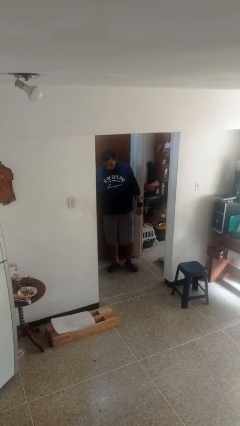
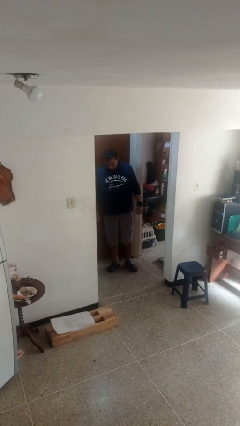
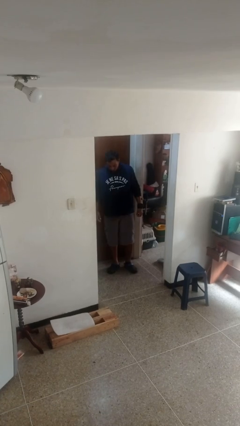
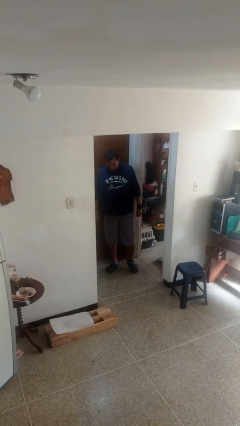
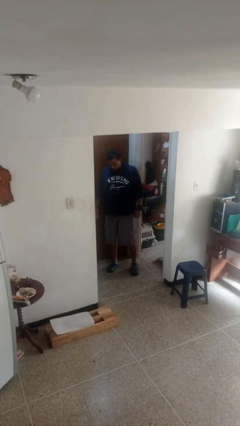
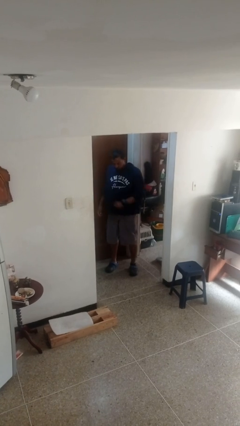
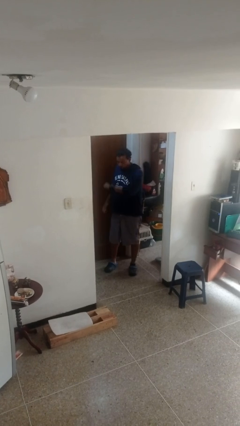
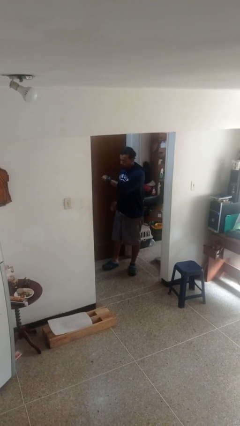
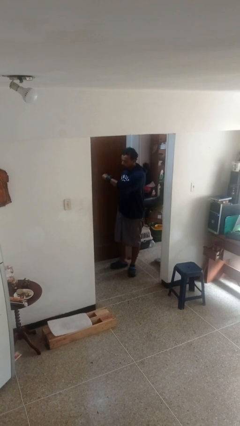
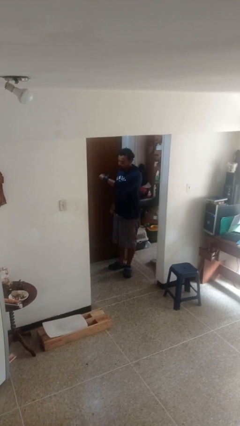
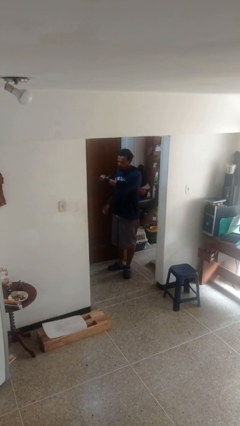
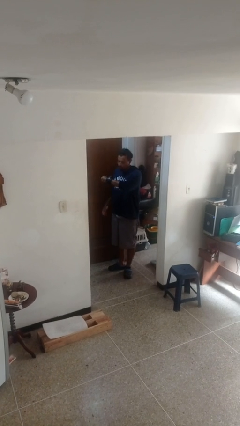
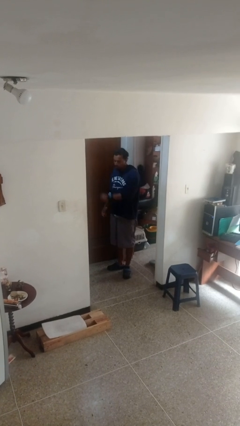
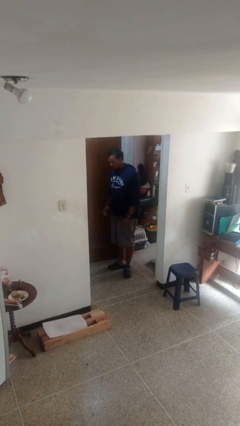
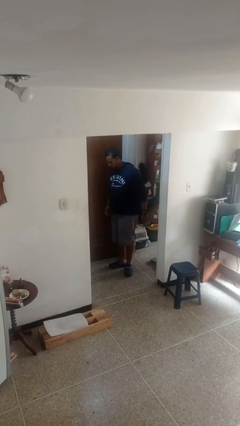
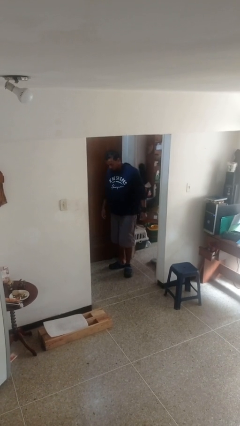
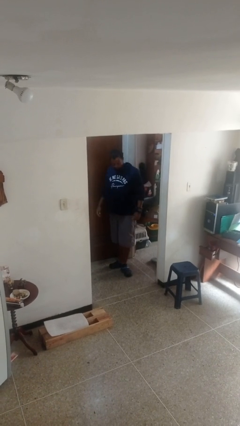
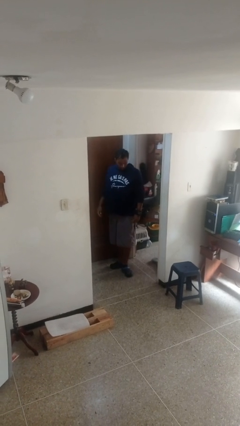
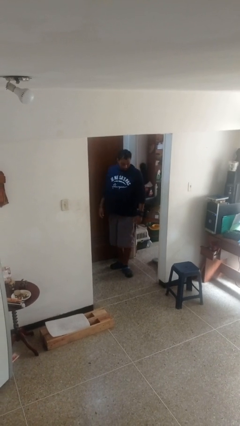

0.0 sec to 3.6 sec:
person looks at wristwatch

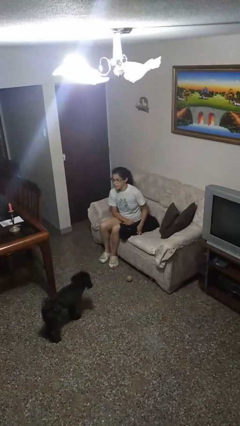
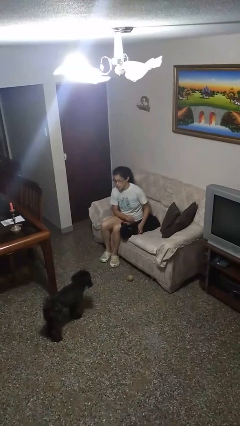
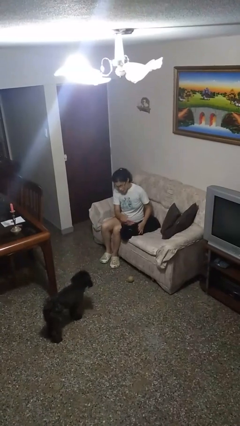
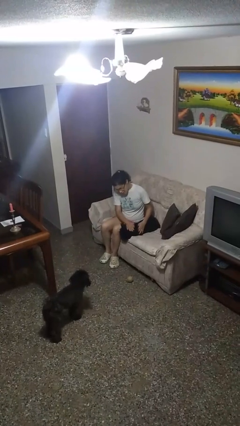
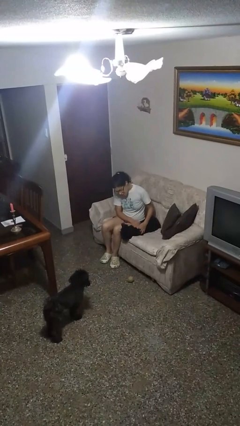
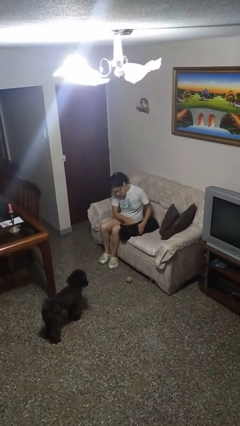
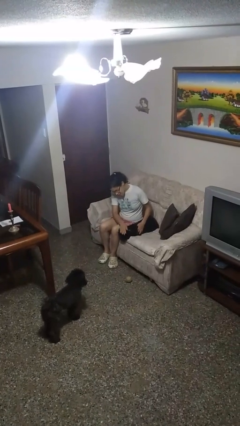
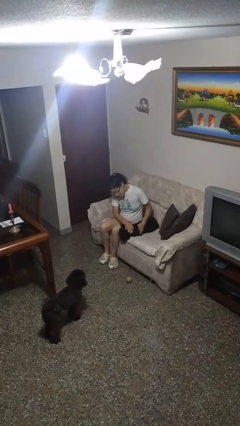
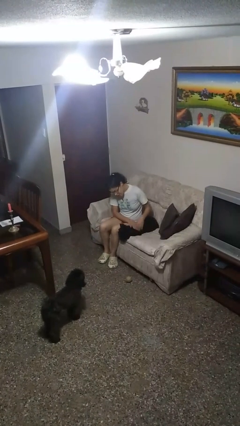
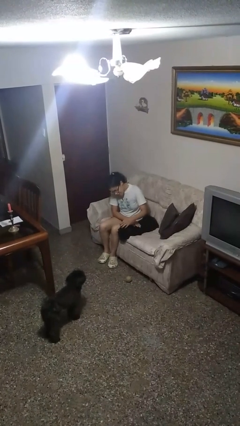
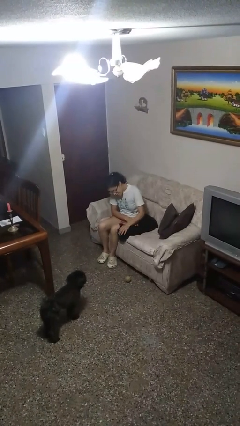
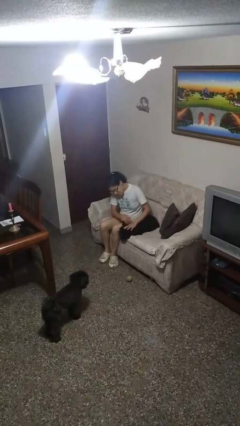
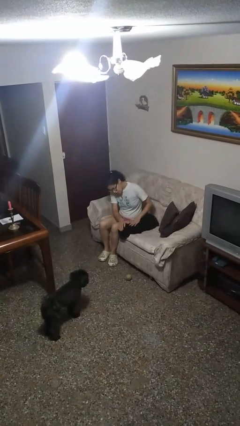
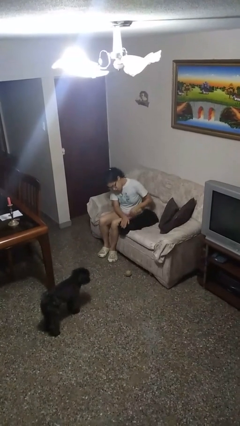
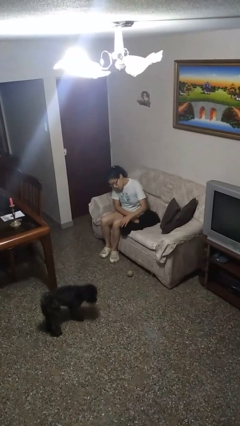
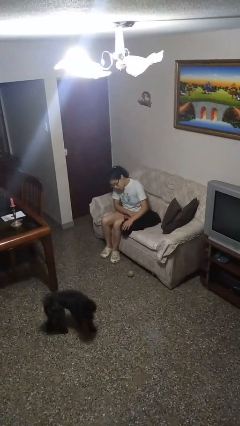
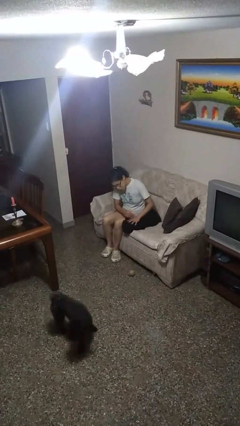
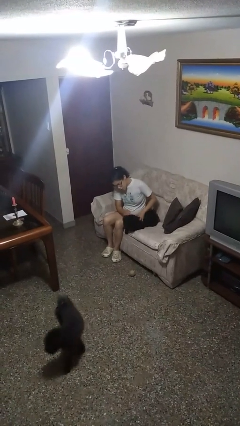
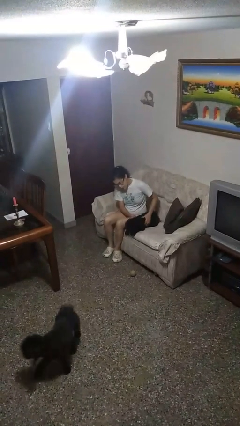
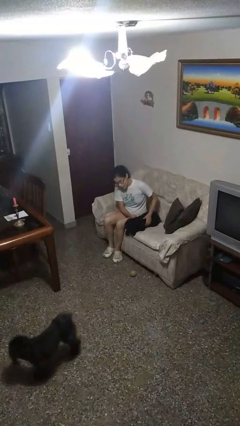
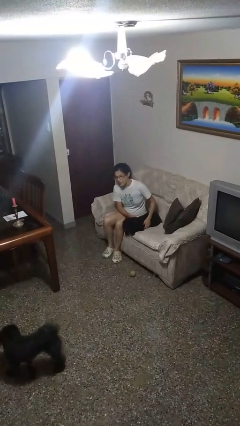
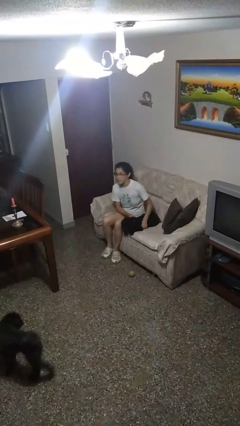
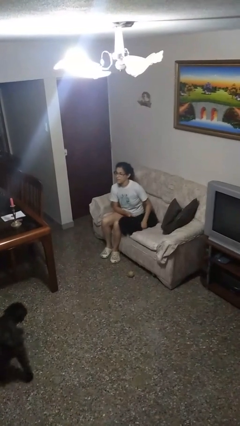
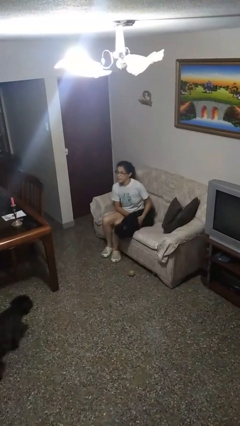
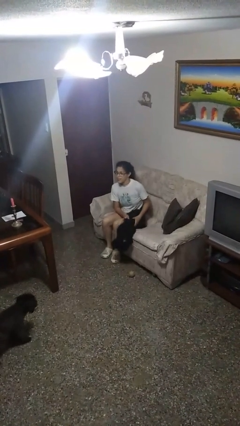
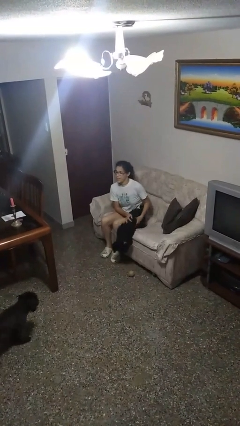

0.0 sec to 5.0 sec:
person pets dog

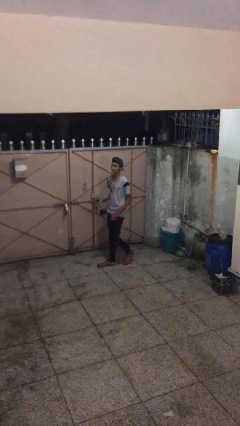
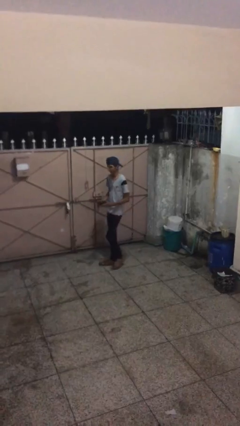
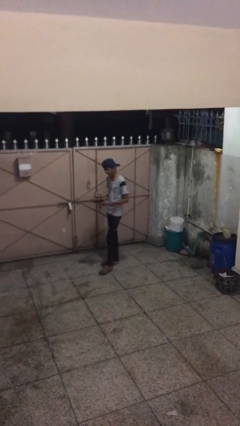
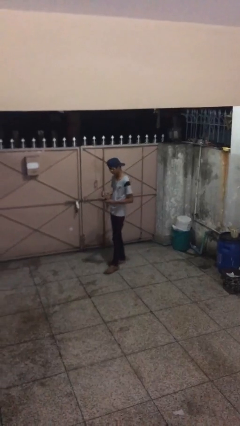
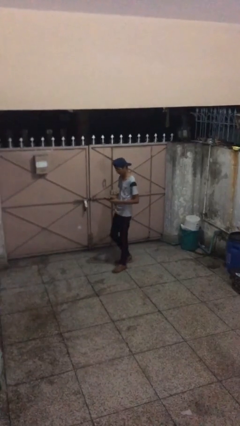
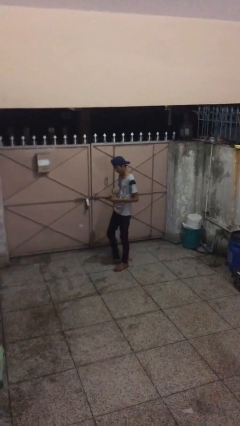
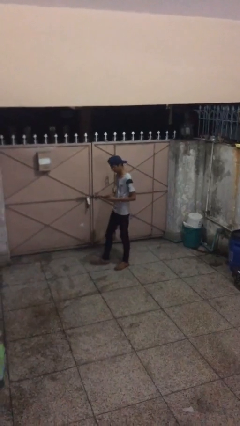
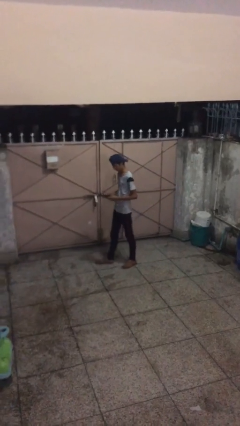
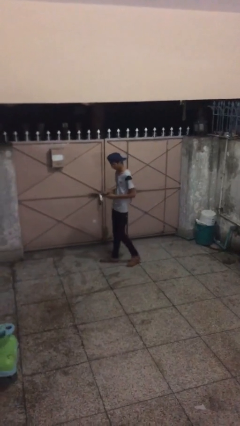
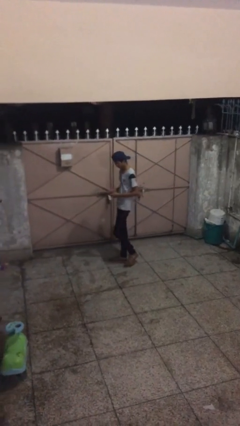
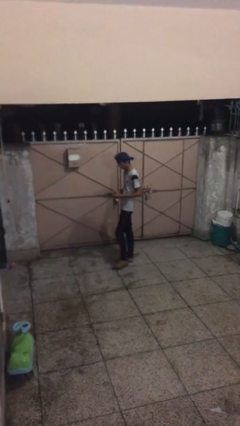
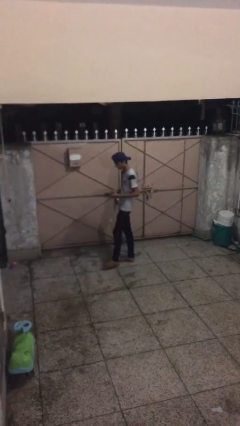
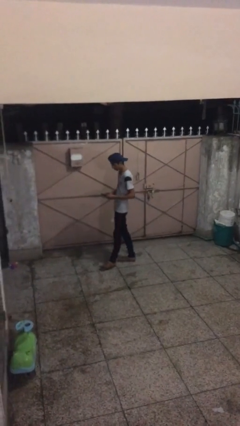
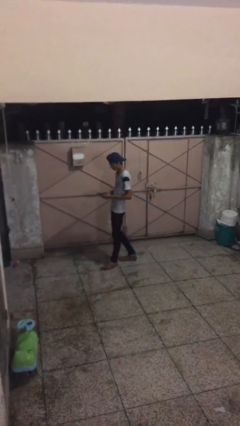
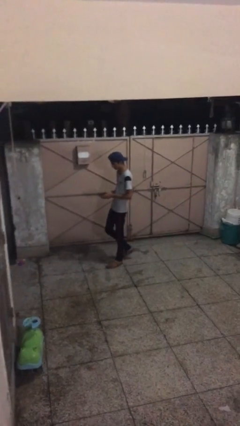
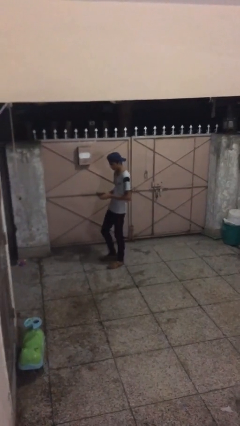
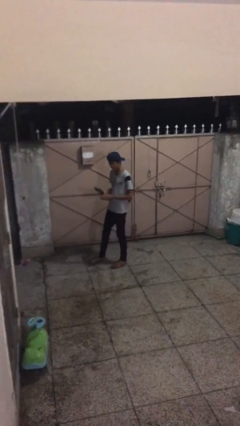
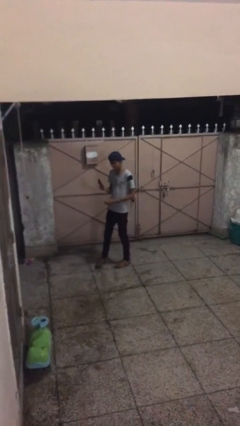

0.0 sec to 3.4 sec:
person texts on phone

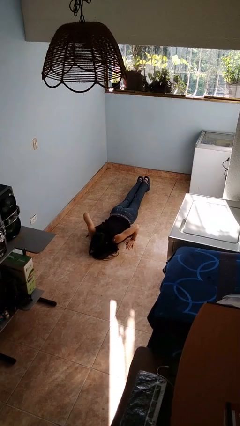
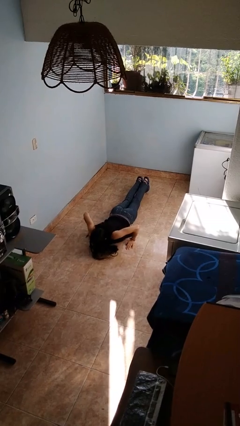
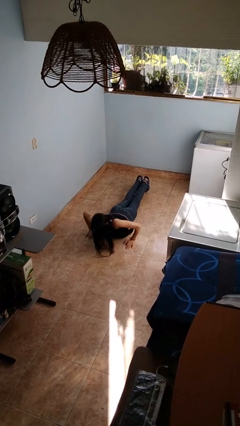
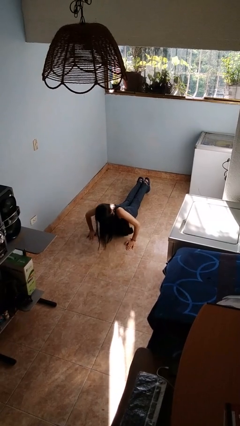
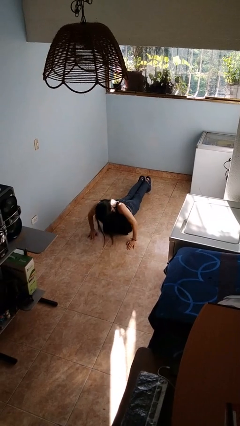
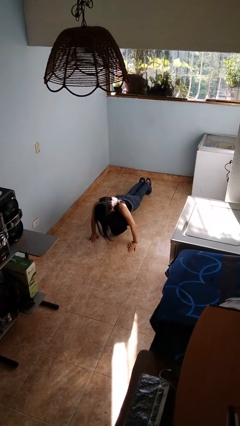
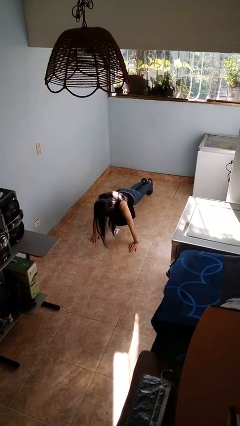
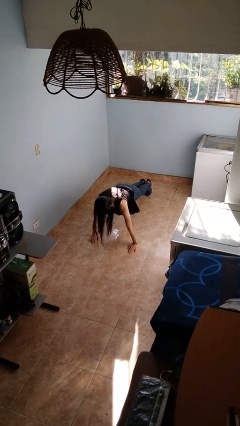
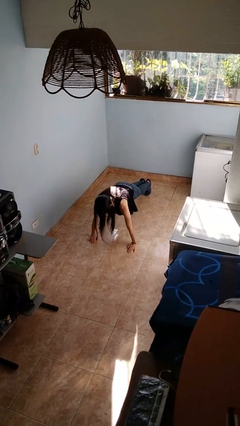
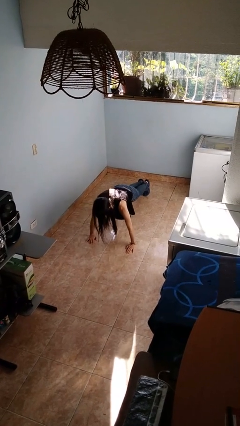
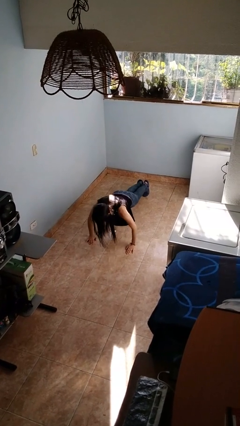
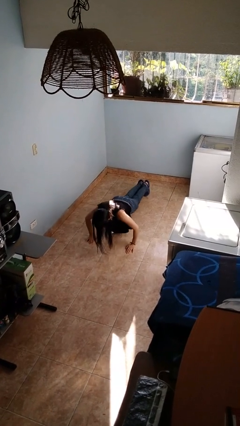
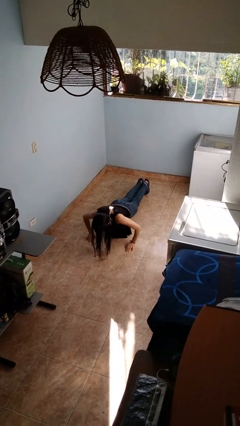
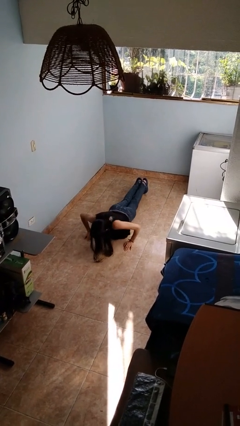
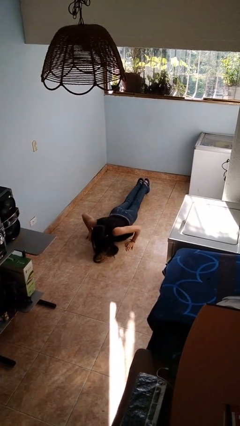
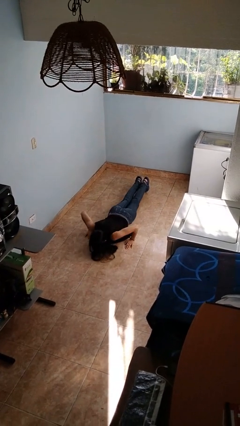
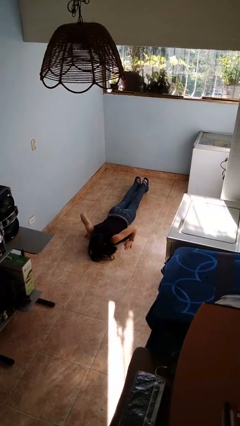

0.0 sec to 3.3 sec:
person exercises with pushup

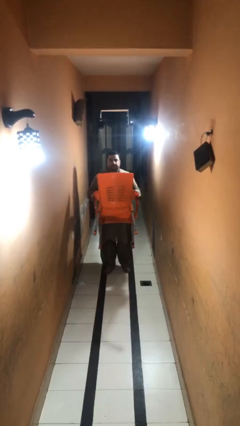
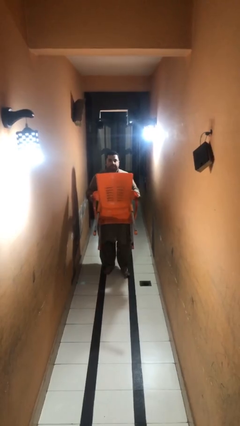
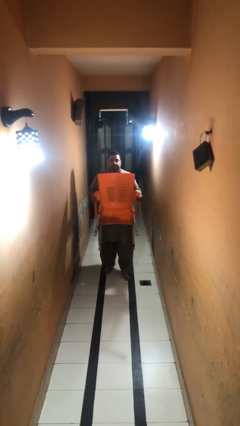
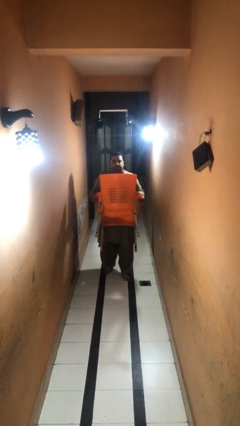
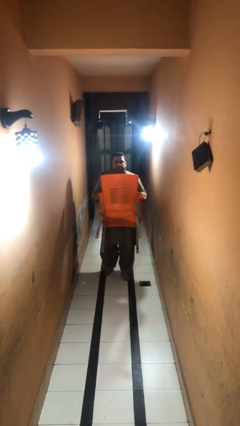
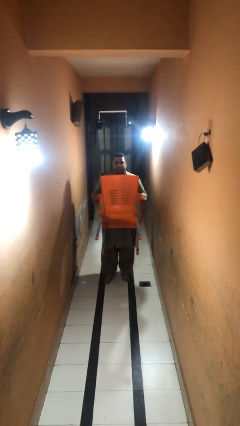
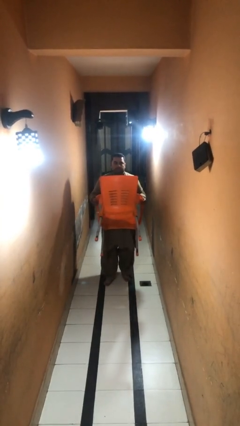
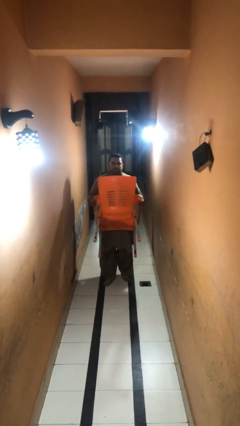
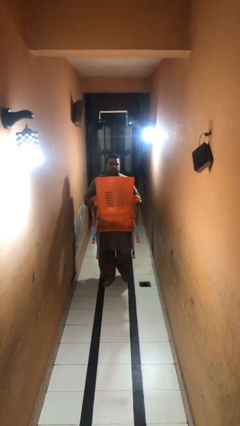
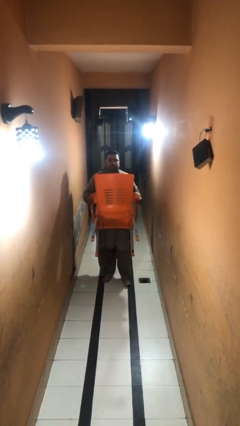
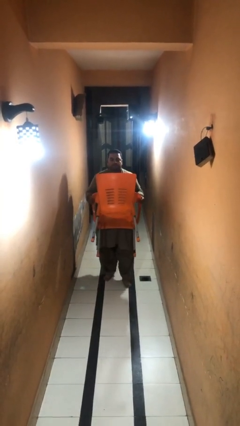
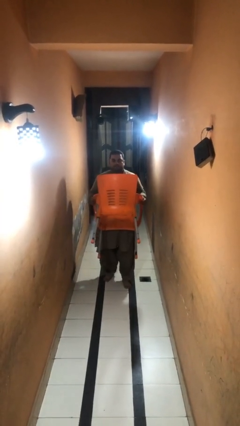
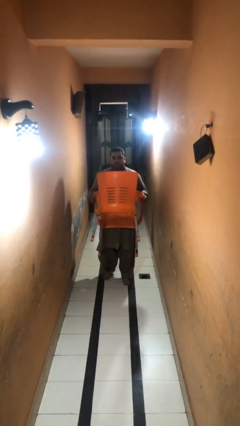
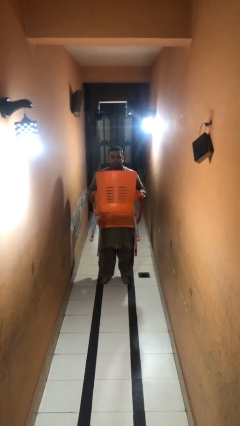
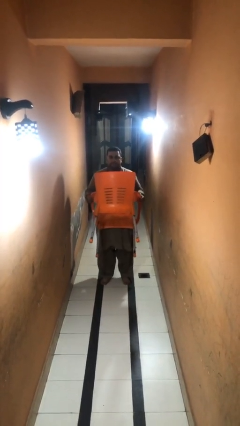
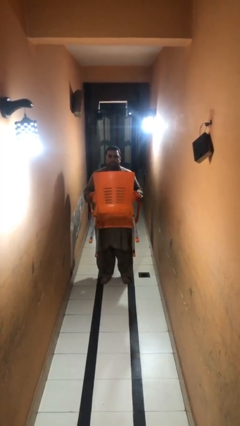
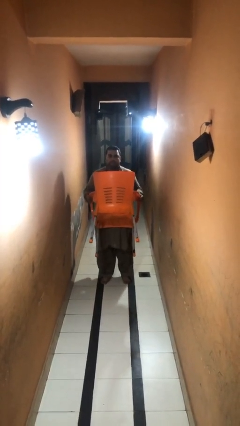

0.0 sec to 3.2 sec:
person carries furniture
